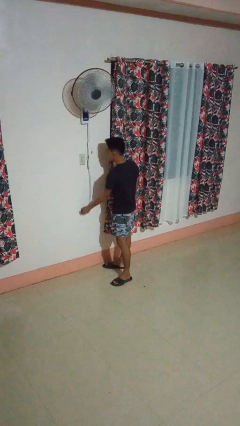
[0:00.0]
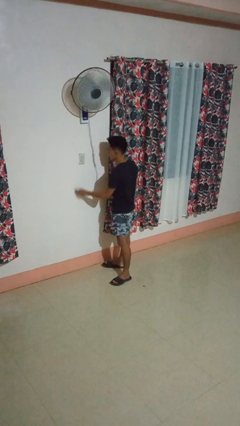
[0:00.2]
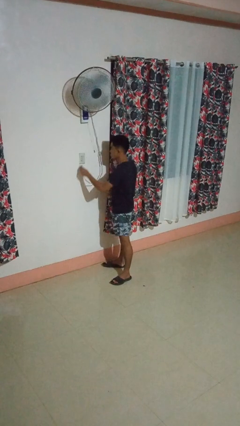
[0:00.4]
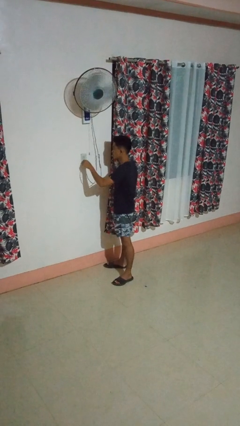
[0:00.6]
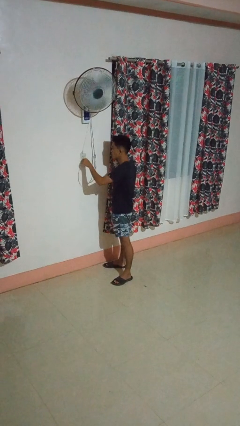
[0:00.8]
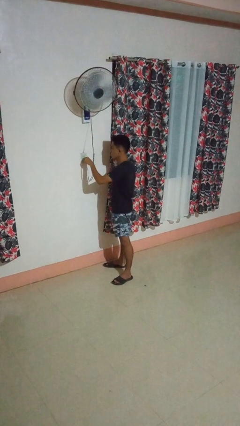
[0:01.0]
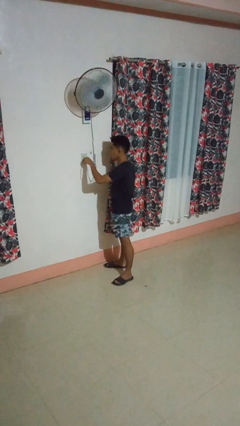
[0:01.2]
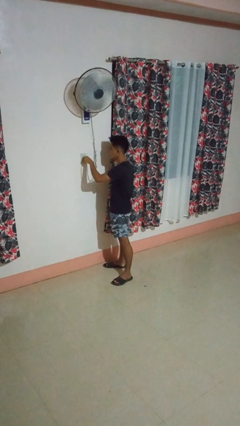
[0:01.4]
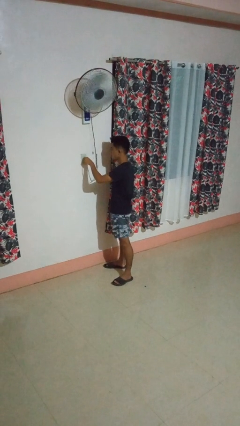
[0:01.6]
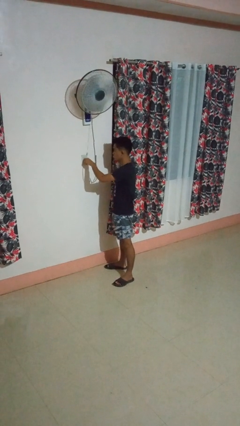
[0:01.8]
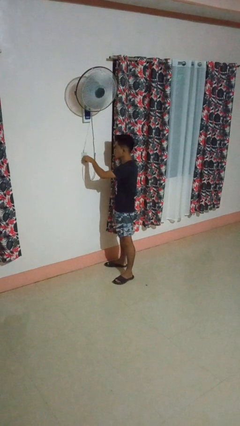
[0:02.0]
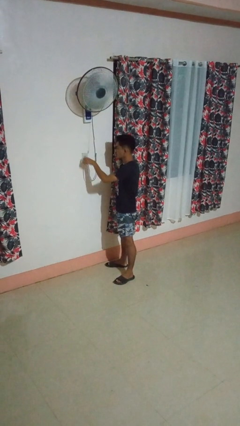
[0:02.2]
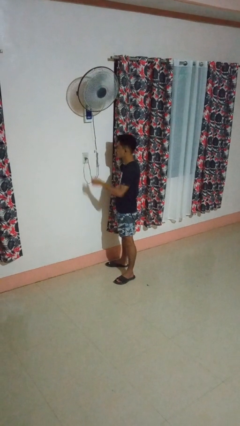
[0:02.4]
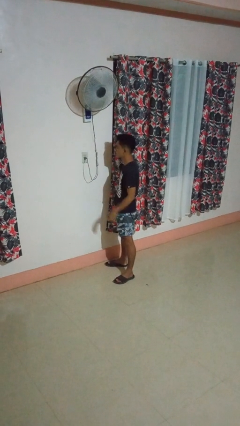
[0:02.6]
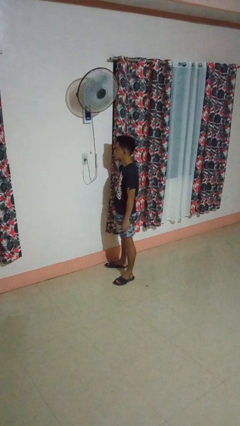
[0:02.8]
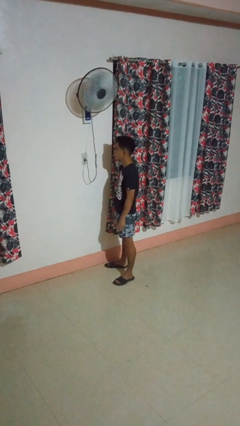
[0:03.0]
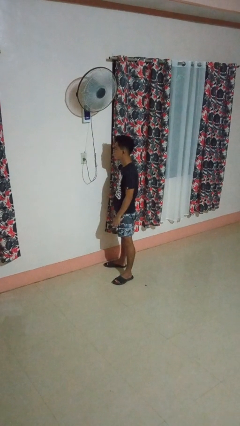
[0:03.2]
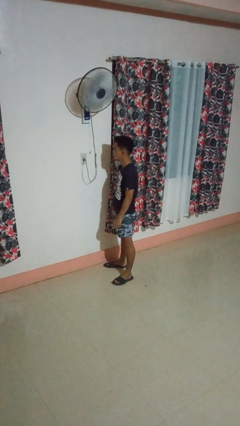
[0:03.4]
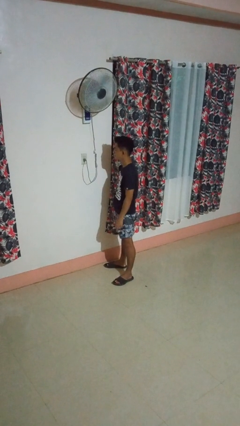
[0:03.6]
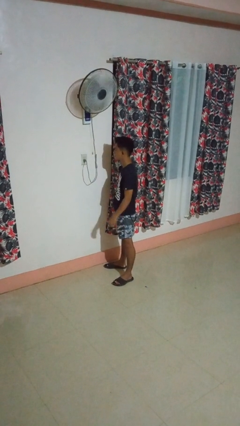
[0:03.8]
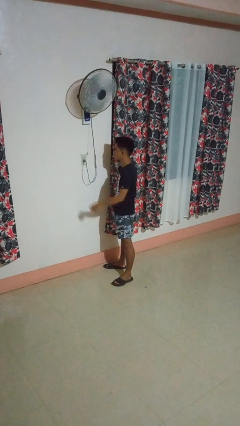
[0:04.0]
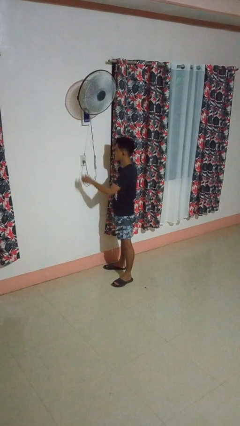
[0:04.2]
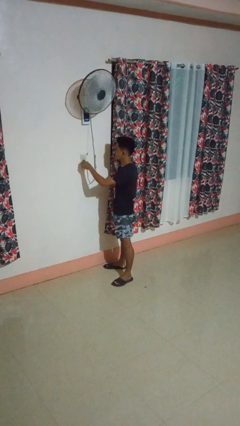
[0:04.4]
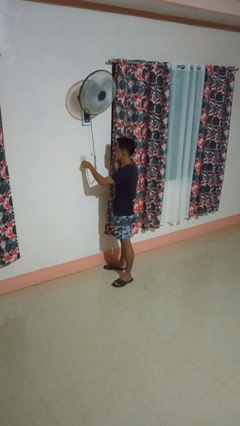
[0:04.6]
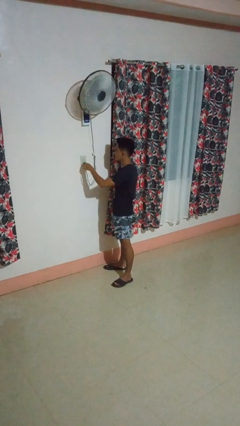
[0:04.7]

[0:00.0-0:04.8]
person plugs into electrical socket

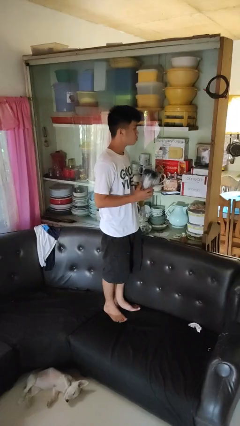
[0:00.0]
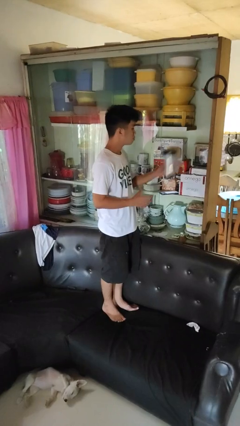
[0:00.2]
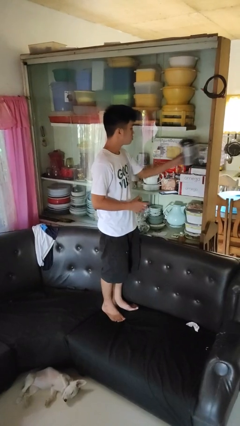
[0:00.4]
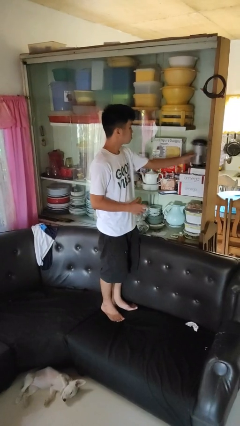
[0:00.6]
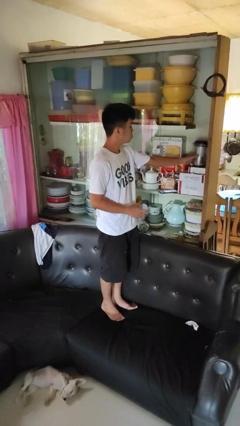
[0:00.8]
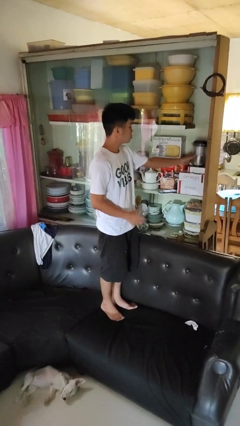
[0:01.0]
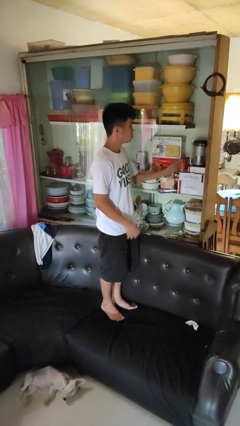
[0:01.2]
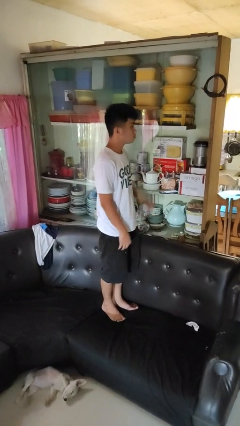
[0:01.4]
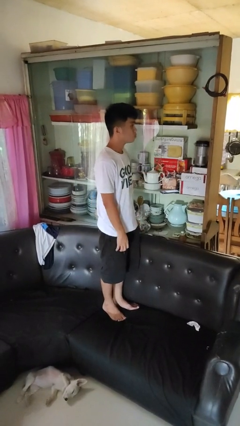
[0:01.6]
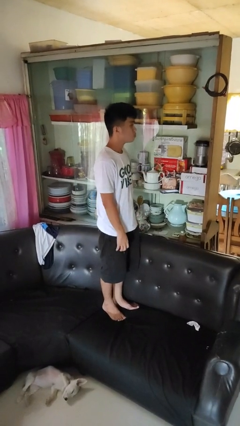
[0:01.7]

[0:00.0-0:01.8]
person puts down object into cabinet

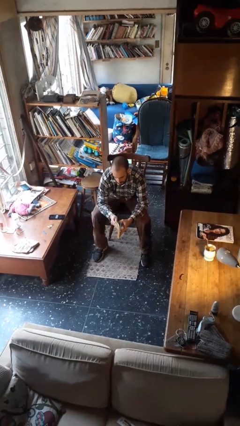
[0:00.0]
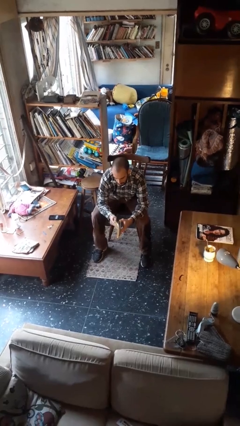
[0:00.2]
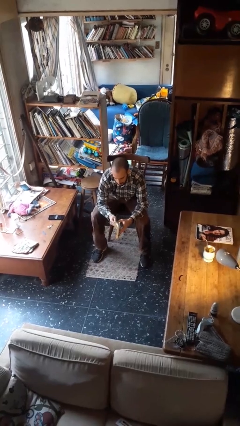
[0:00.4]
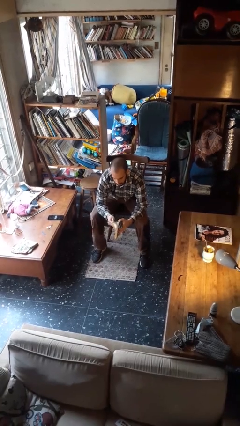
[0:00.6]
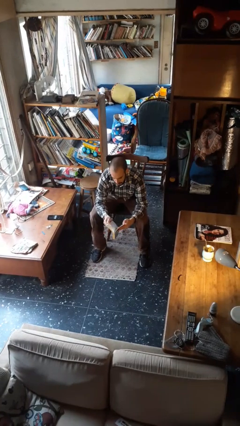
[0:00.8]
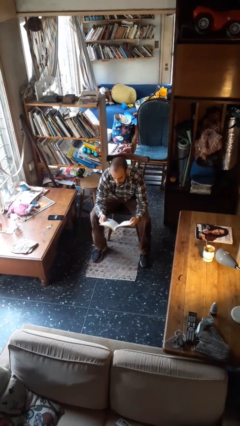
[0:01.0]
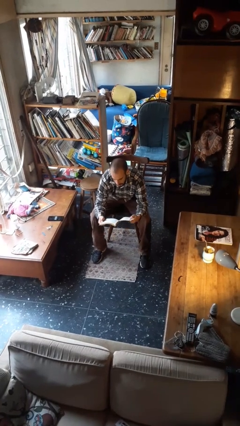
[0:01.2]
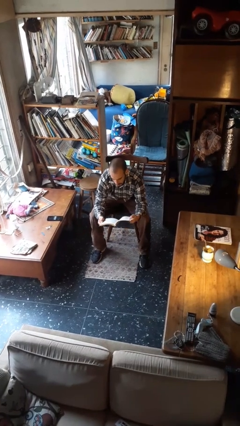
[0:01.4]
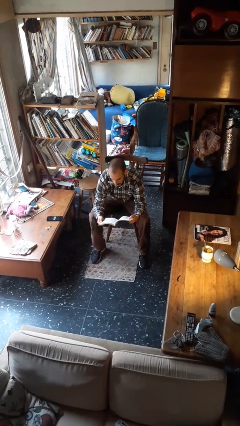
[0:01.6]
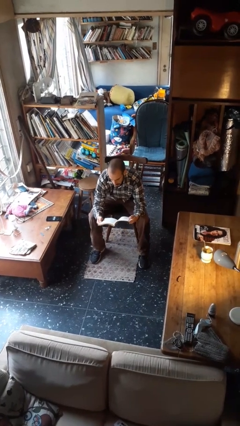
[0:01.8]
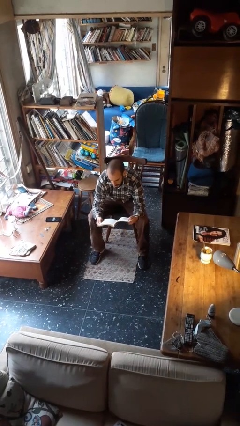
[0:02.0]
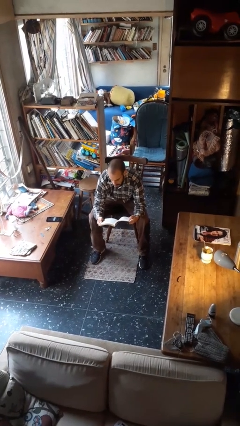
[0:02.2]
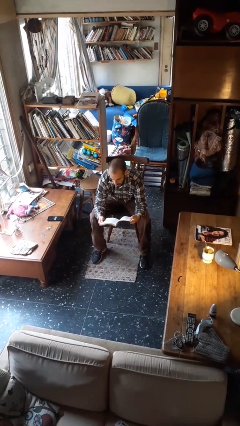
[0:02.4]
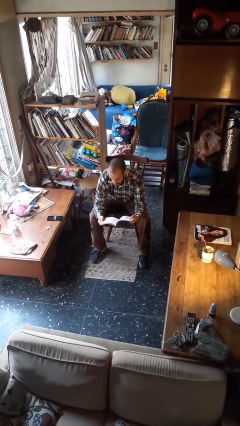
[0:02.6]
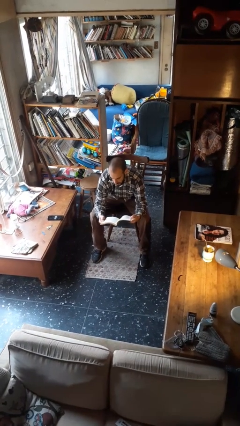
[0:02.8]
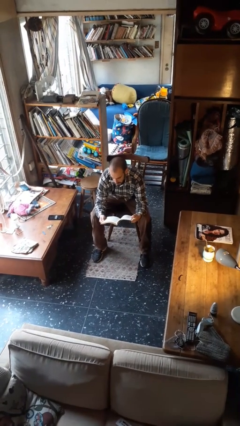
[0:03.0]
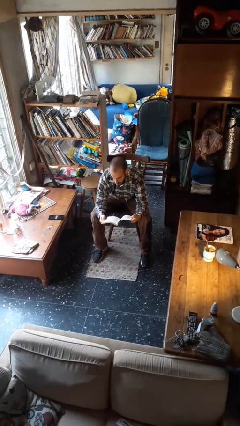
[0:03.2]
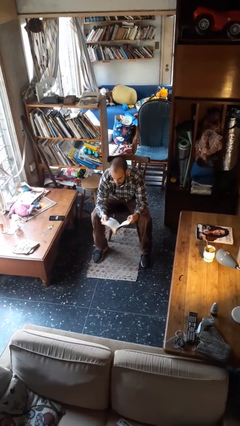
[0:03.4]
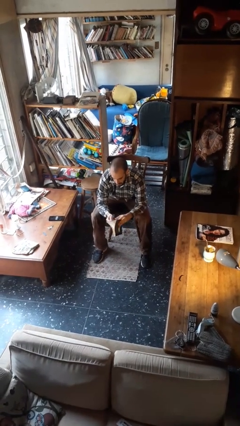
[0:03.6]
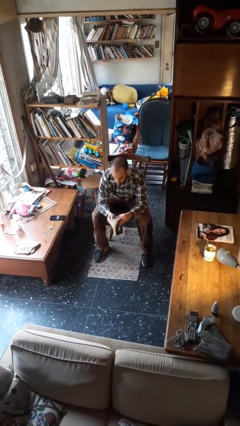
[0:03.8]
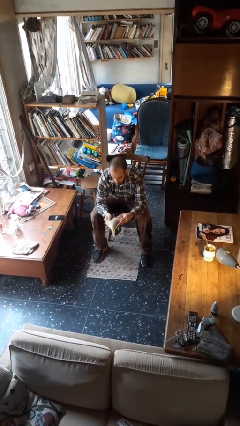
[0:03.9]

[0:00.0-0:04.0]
person reads book

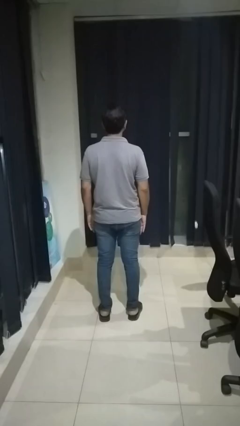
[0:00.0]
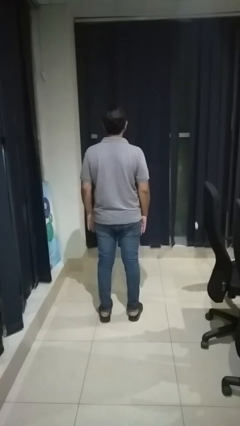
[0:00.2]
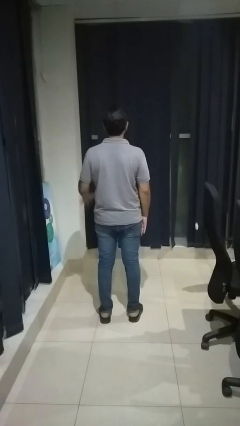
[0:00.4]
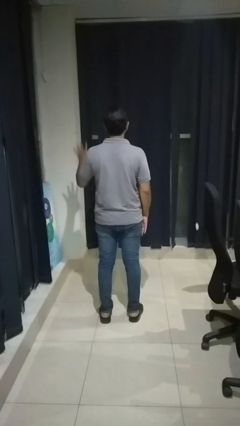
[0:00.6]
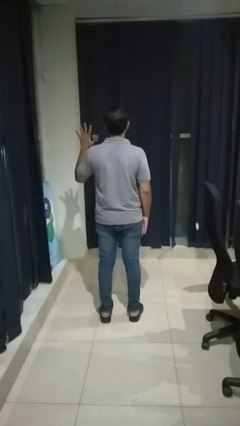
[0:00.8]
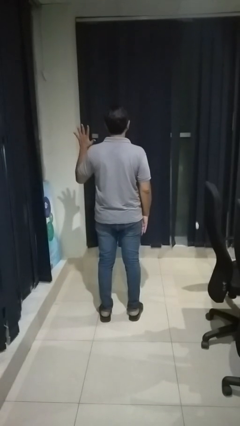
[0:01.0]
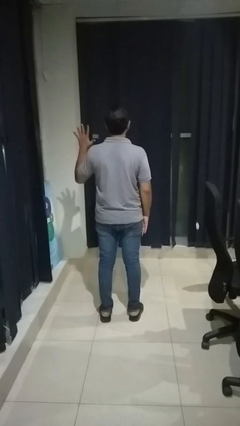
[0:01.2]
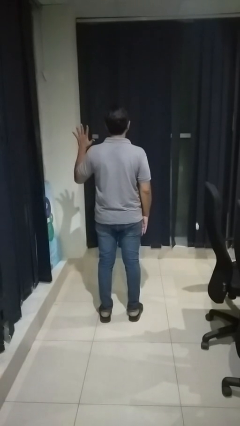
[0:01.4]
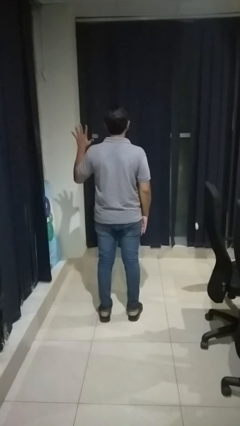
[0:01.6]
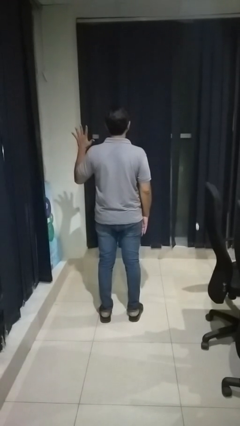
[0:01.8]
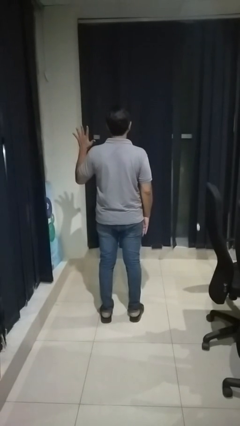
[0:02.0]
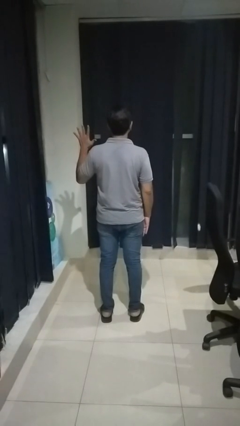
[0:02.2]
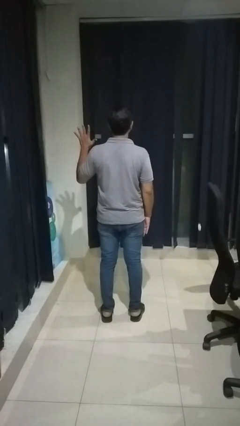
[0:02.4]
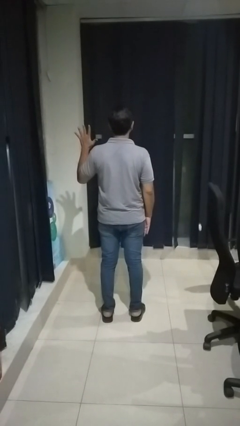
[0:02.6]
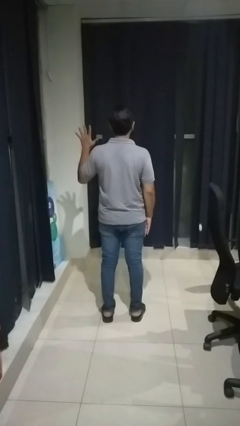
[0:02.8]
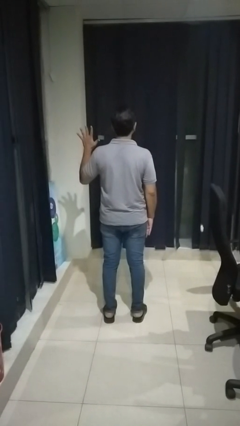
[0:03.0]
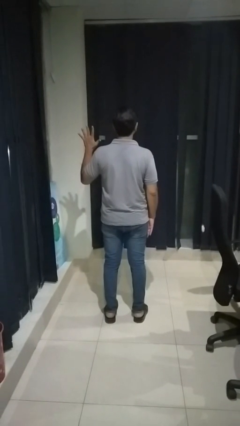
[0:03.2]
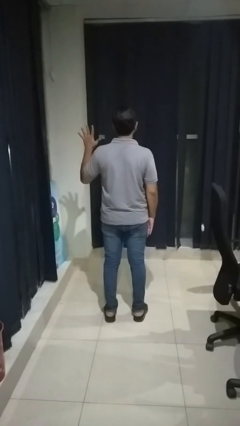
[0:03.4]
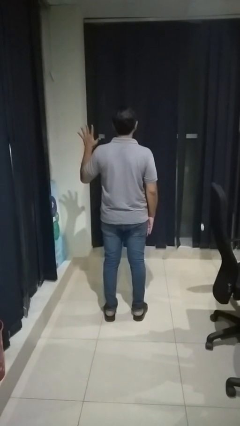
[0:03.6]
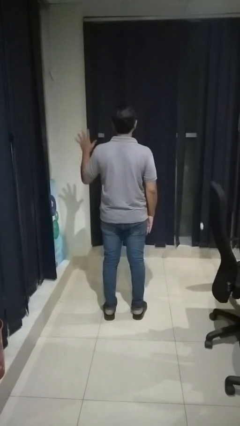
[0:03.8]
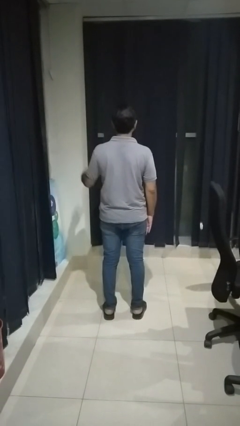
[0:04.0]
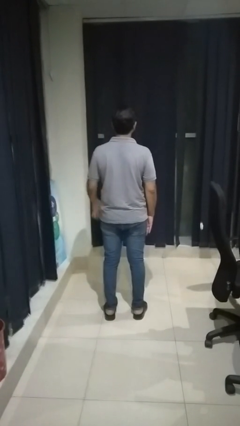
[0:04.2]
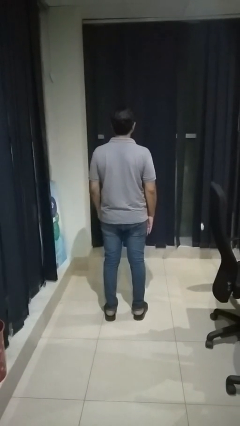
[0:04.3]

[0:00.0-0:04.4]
person gestures number five

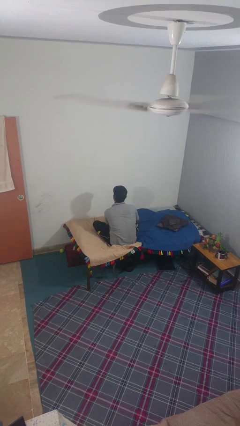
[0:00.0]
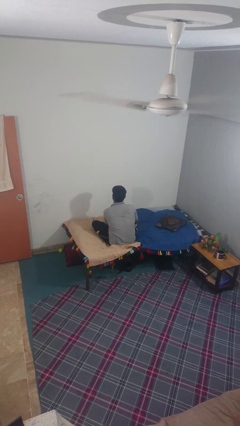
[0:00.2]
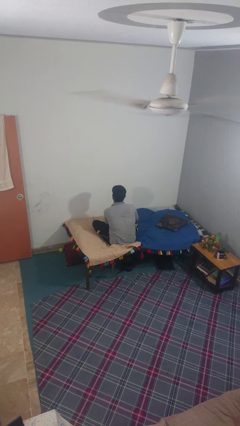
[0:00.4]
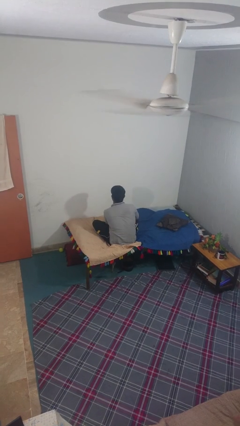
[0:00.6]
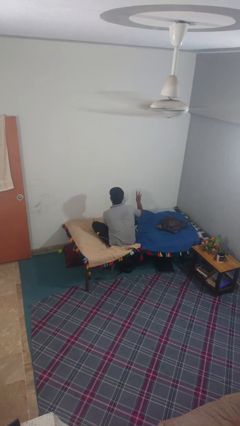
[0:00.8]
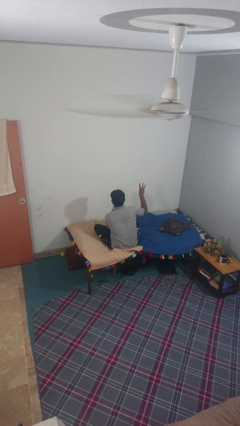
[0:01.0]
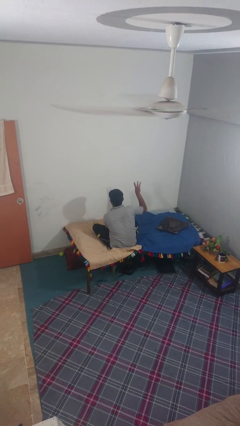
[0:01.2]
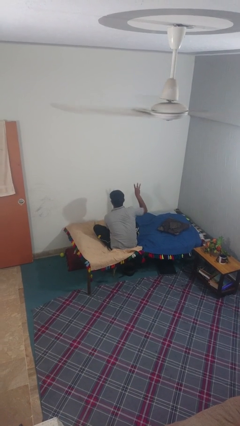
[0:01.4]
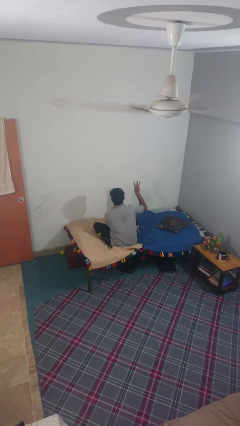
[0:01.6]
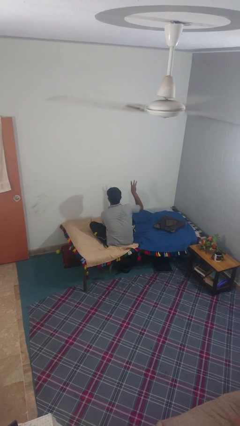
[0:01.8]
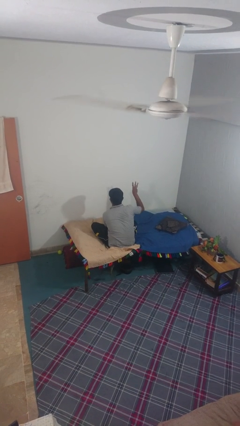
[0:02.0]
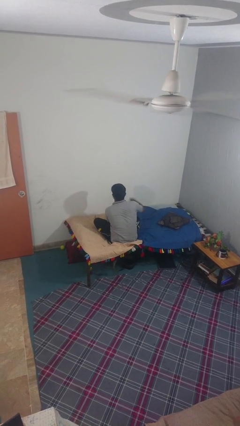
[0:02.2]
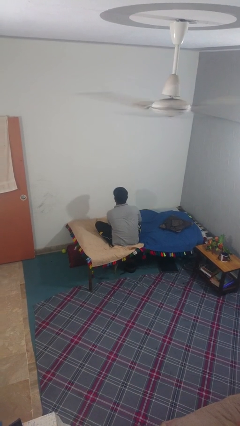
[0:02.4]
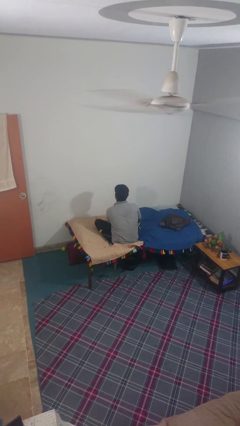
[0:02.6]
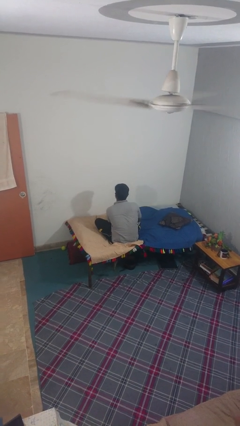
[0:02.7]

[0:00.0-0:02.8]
person gestures number three
